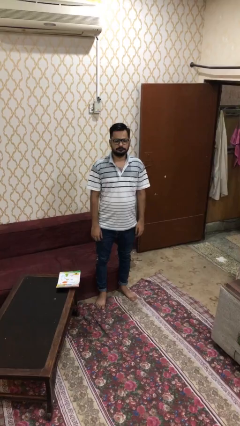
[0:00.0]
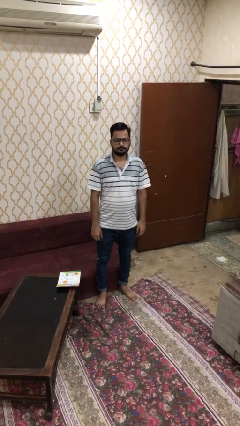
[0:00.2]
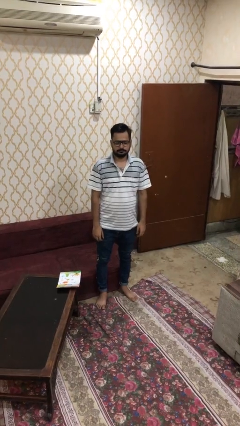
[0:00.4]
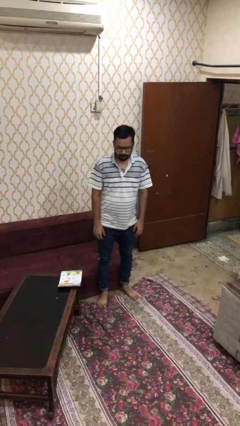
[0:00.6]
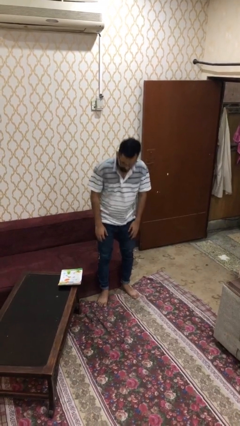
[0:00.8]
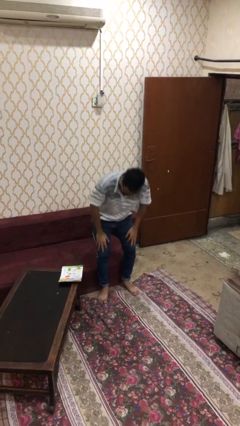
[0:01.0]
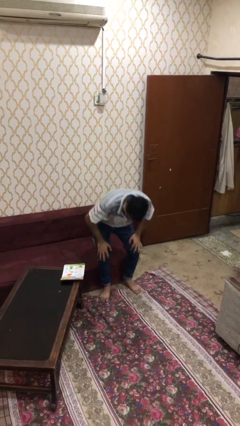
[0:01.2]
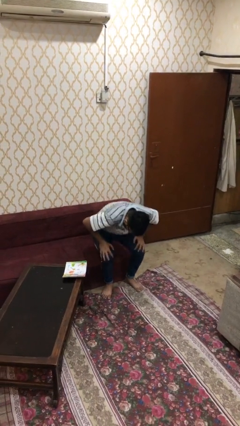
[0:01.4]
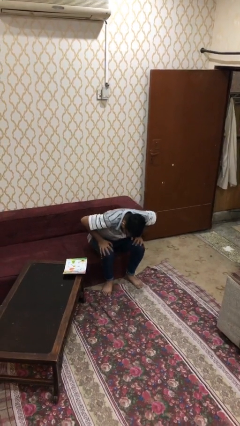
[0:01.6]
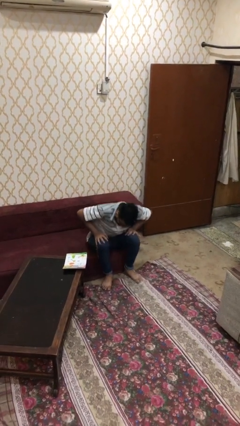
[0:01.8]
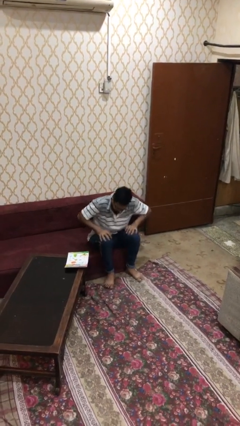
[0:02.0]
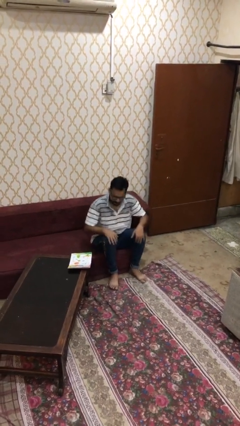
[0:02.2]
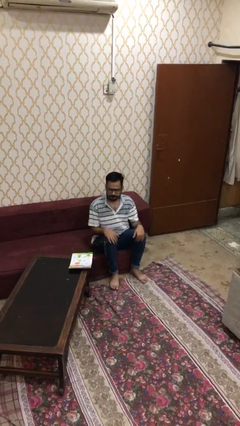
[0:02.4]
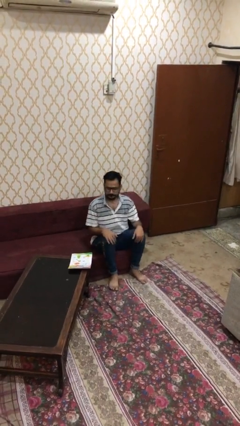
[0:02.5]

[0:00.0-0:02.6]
person sits down

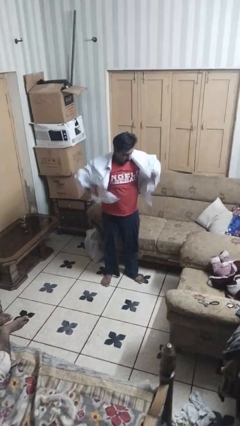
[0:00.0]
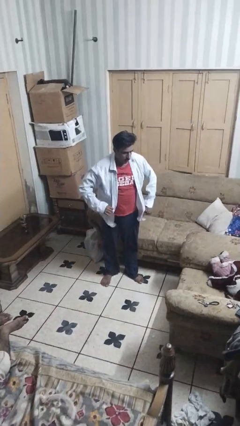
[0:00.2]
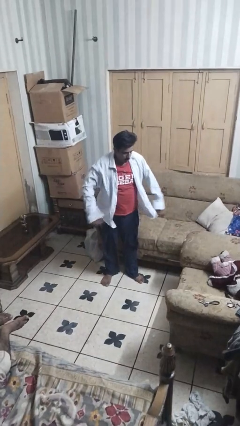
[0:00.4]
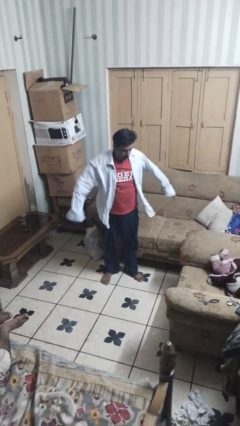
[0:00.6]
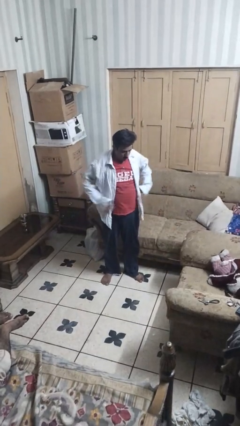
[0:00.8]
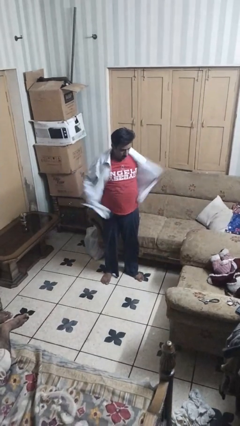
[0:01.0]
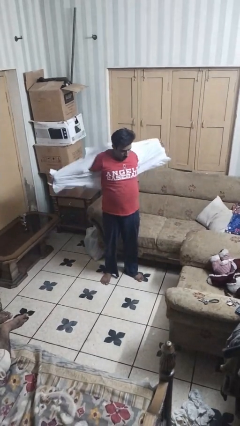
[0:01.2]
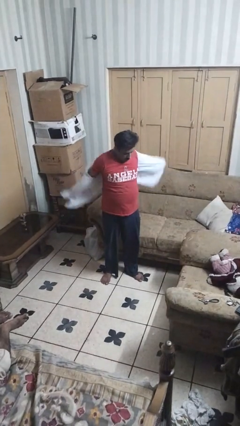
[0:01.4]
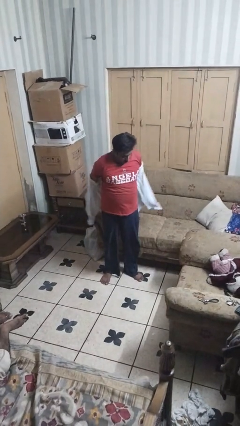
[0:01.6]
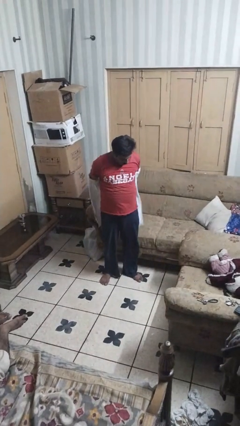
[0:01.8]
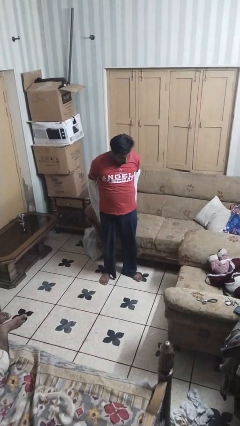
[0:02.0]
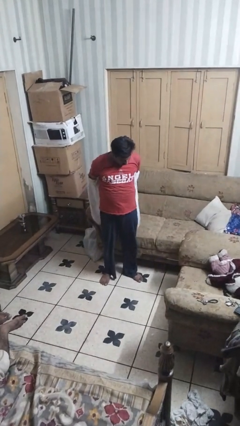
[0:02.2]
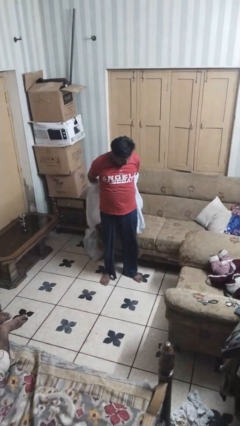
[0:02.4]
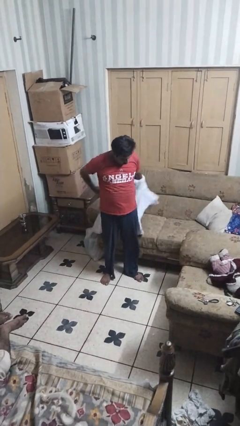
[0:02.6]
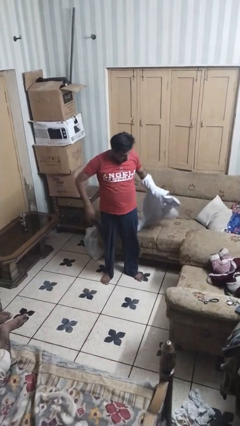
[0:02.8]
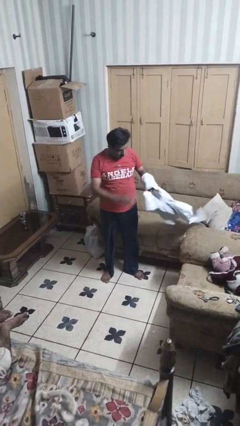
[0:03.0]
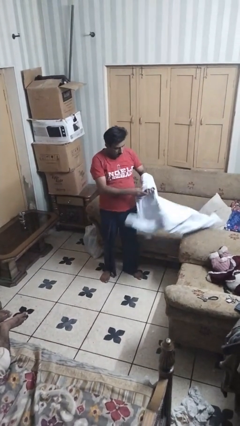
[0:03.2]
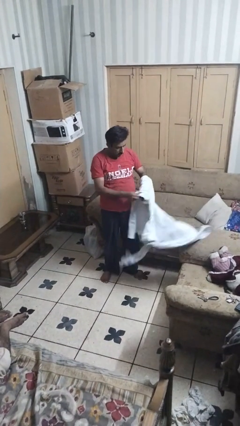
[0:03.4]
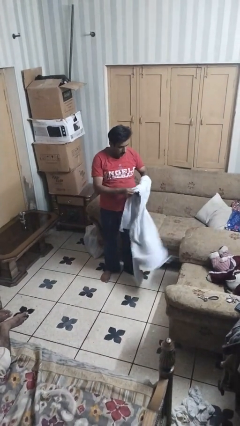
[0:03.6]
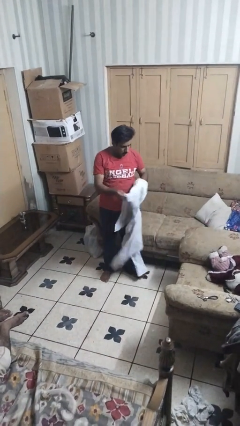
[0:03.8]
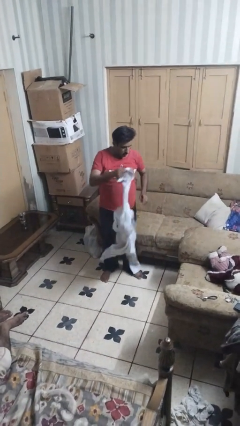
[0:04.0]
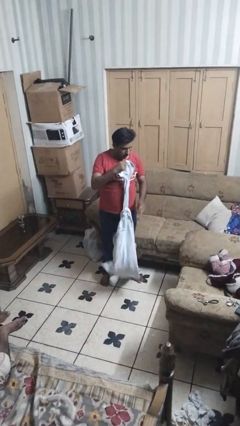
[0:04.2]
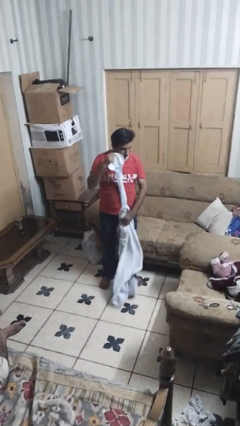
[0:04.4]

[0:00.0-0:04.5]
person takes off shirt

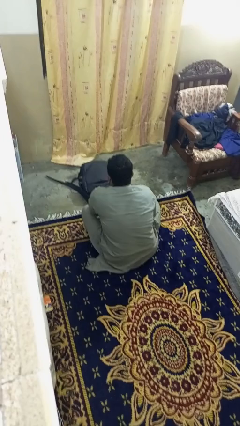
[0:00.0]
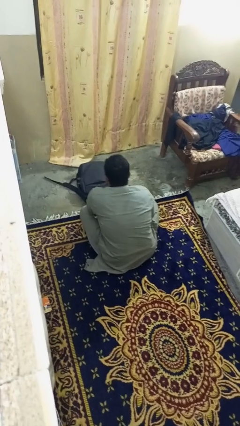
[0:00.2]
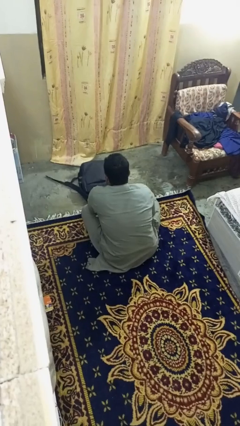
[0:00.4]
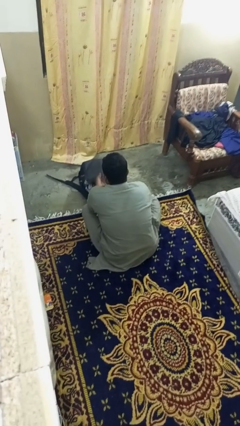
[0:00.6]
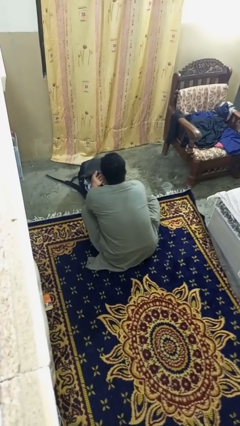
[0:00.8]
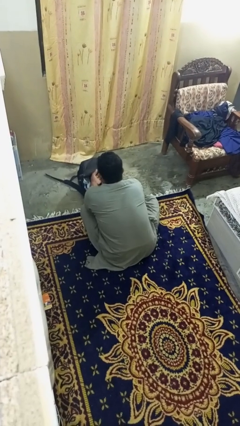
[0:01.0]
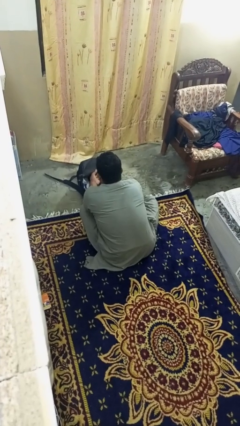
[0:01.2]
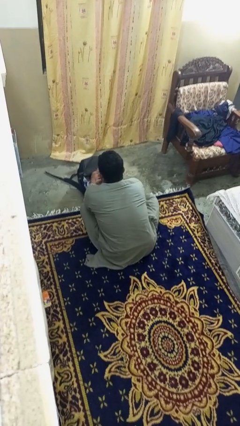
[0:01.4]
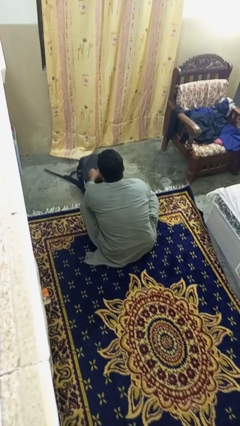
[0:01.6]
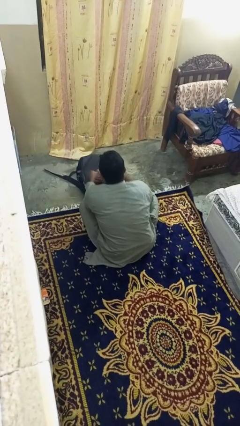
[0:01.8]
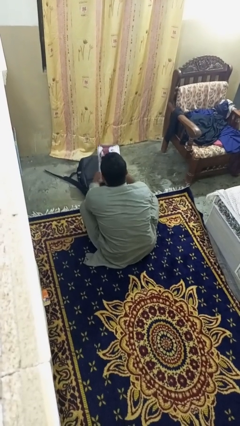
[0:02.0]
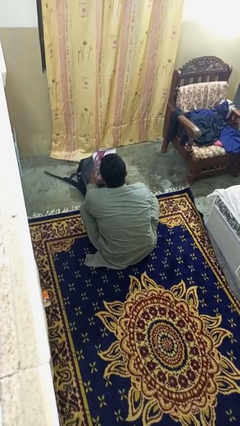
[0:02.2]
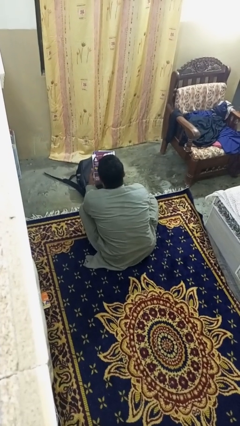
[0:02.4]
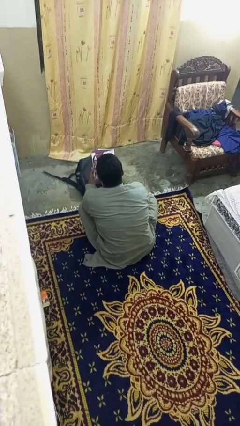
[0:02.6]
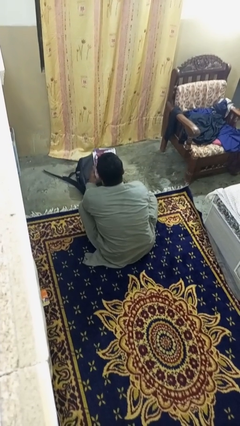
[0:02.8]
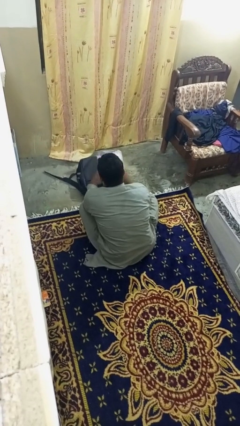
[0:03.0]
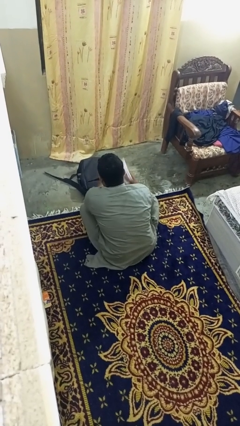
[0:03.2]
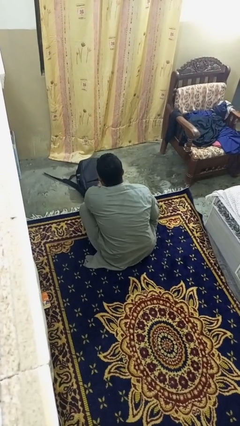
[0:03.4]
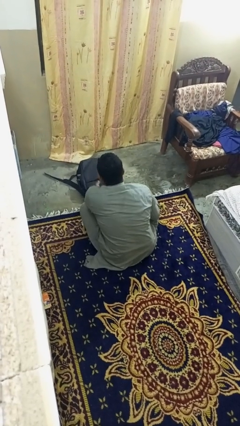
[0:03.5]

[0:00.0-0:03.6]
person takes object from bag

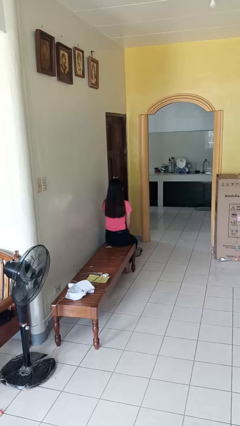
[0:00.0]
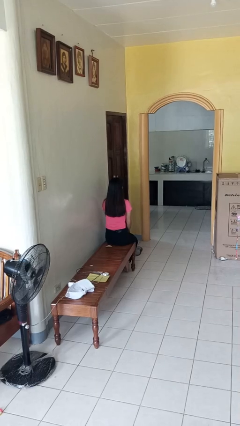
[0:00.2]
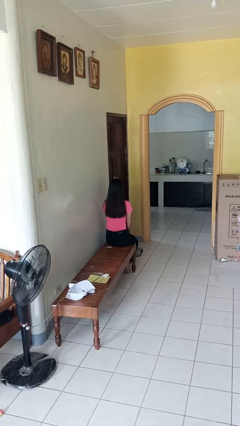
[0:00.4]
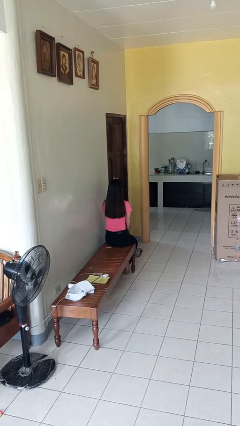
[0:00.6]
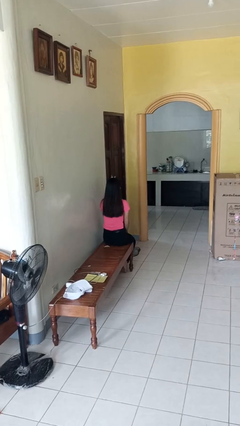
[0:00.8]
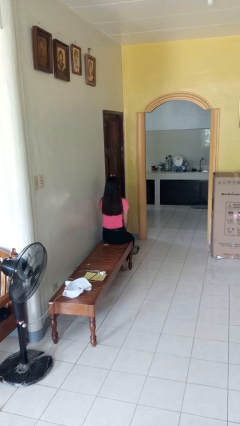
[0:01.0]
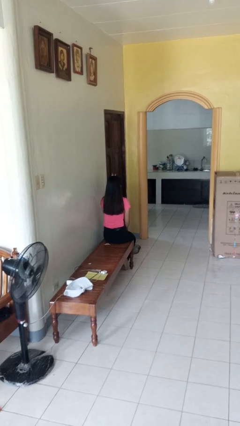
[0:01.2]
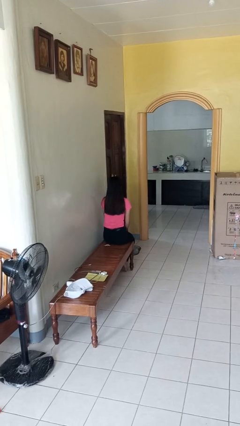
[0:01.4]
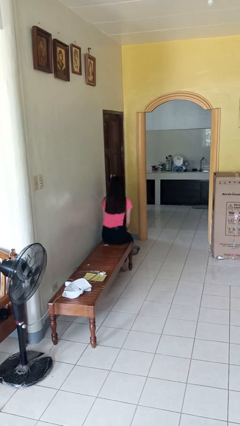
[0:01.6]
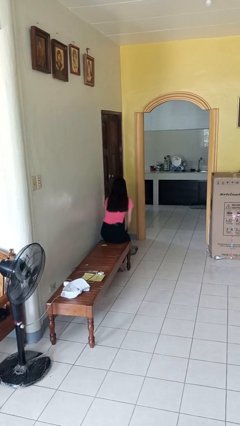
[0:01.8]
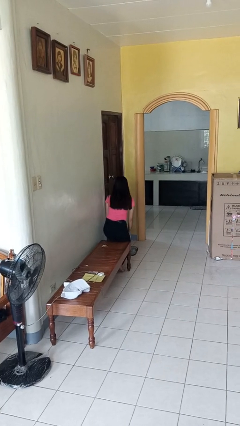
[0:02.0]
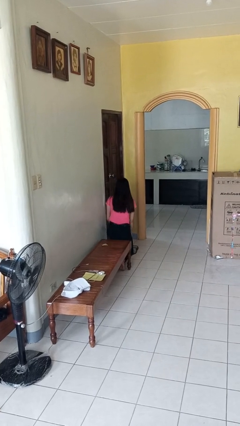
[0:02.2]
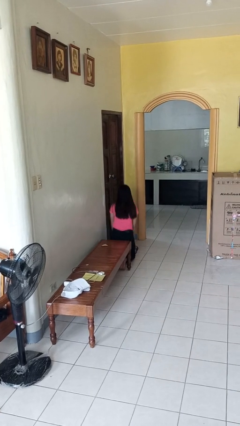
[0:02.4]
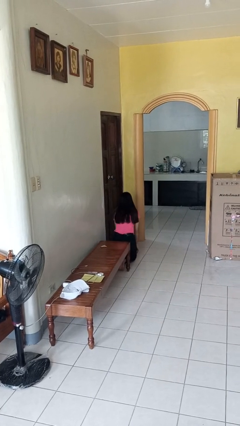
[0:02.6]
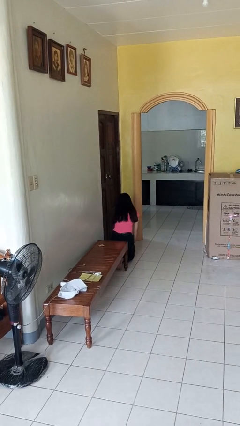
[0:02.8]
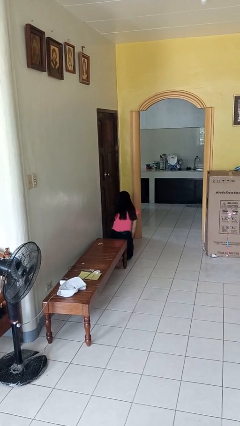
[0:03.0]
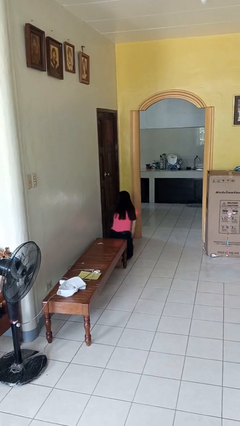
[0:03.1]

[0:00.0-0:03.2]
person falls from chair

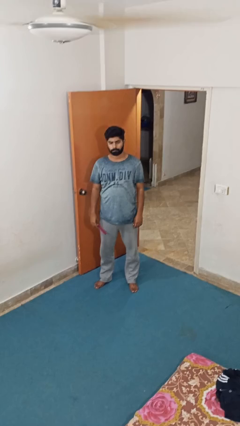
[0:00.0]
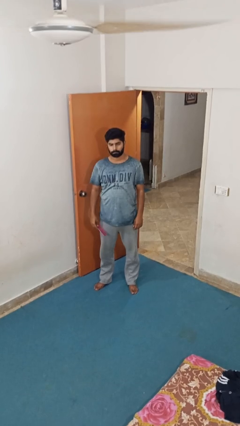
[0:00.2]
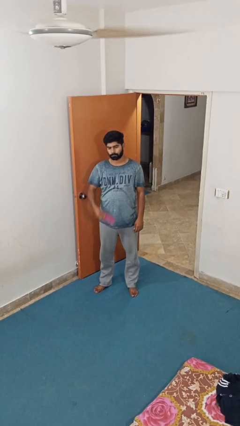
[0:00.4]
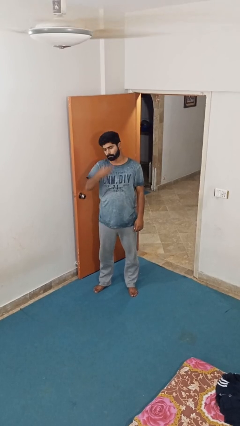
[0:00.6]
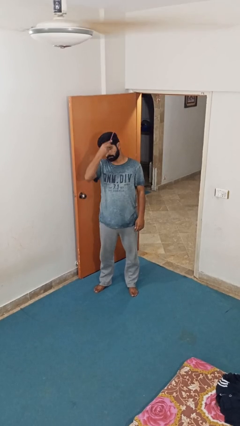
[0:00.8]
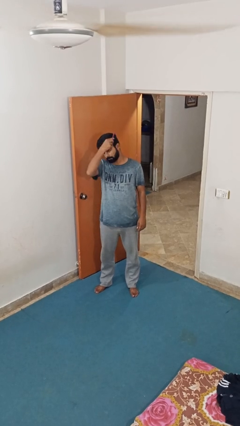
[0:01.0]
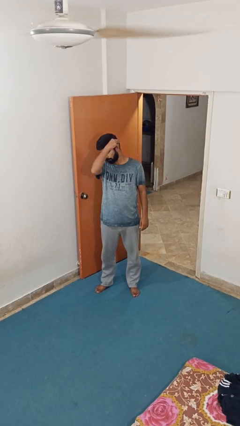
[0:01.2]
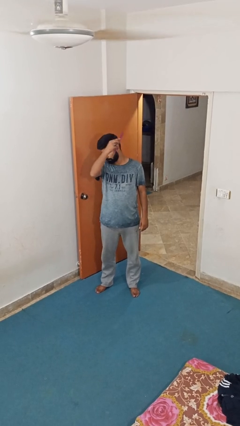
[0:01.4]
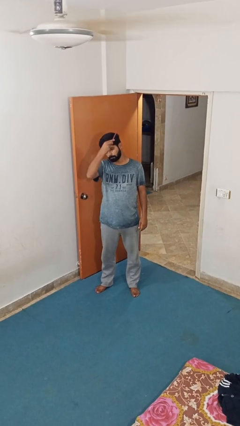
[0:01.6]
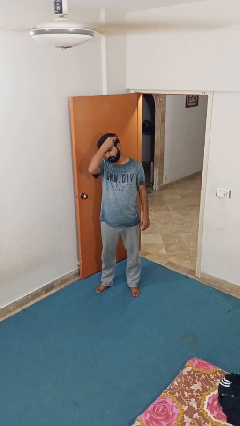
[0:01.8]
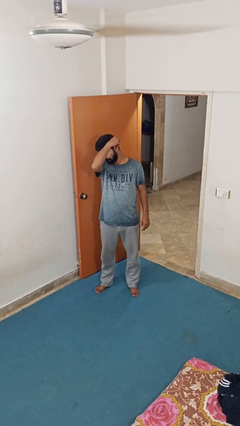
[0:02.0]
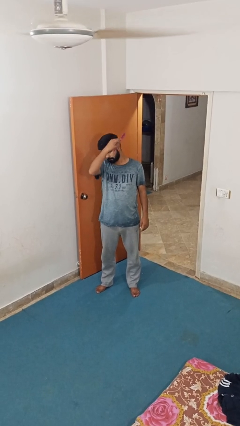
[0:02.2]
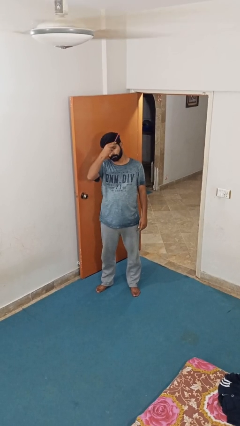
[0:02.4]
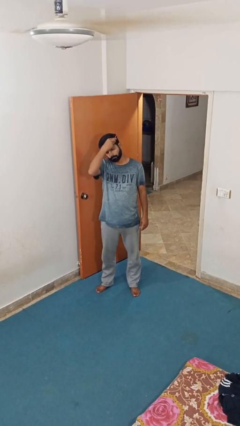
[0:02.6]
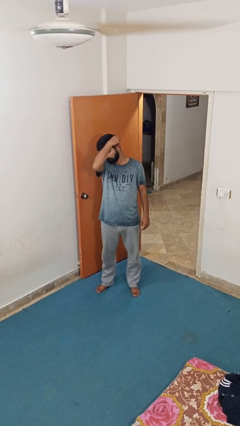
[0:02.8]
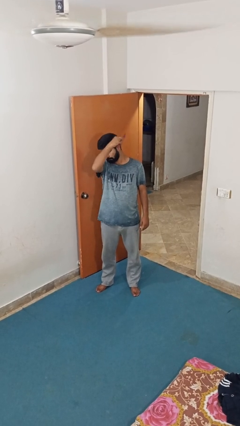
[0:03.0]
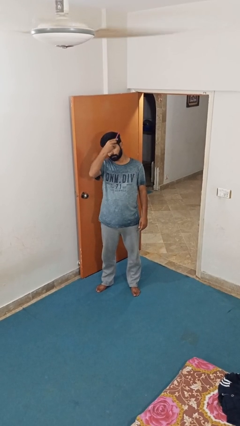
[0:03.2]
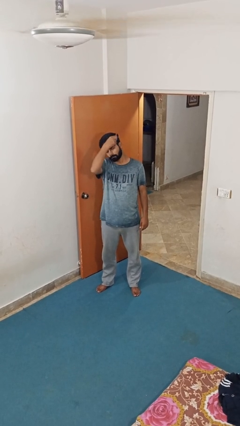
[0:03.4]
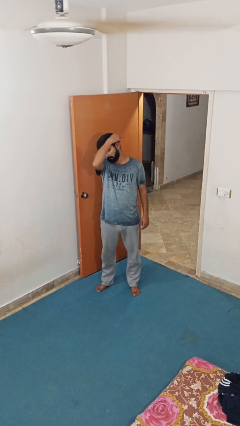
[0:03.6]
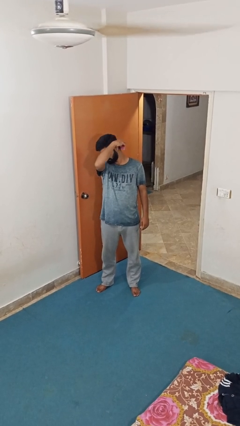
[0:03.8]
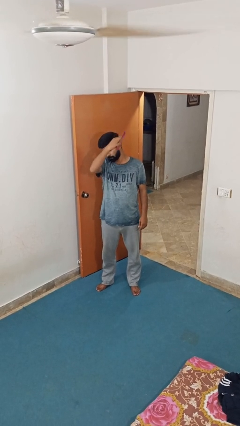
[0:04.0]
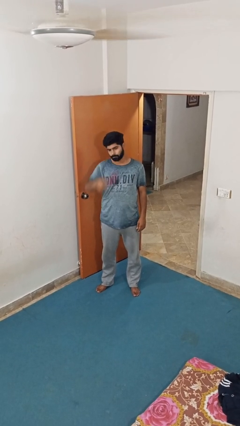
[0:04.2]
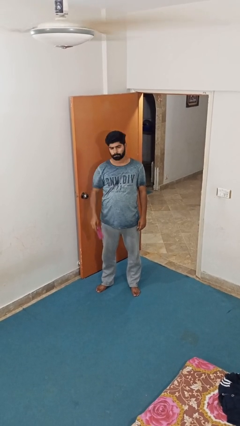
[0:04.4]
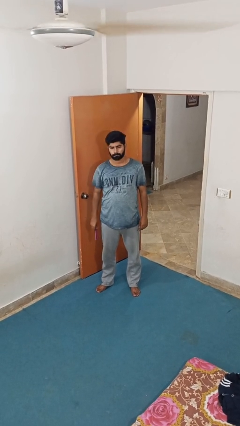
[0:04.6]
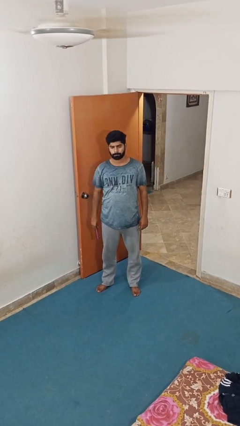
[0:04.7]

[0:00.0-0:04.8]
person brushes hair
